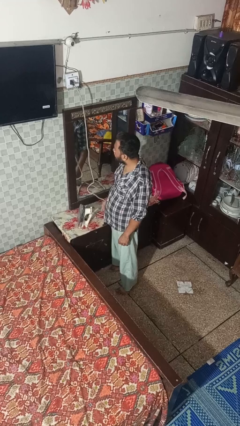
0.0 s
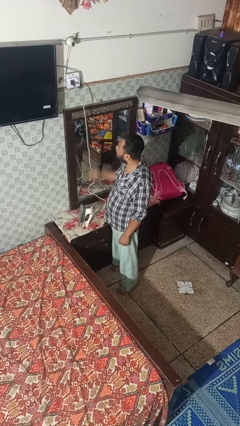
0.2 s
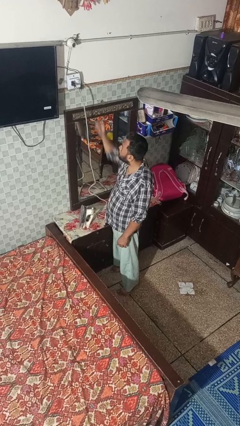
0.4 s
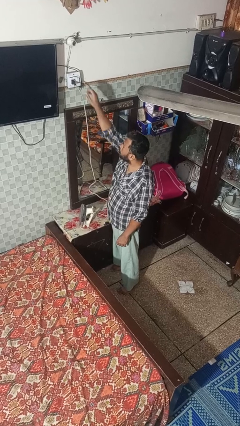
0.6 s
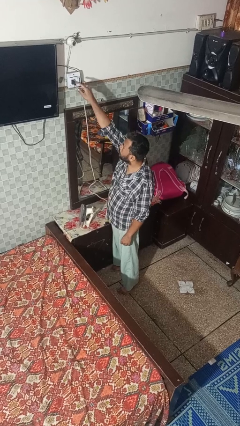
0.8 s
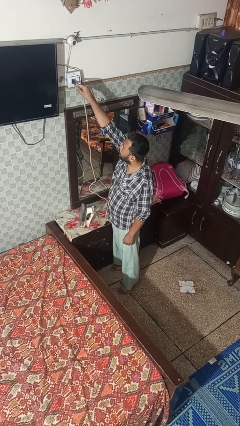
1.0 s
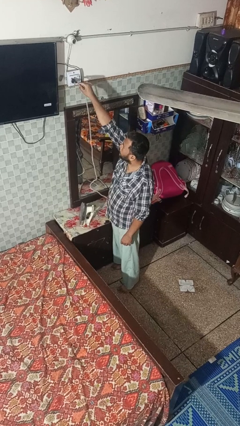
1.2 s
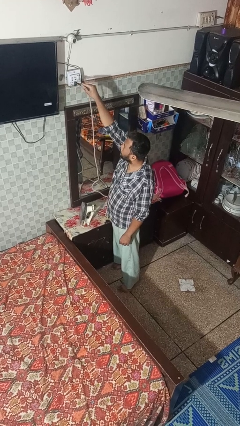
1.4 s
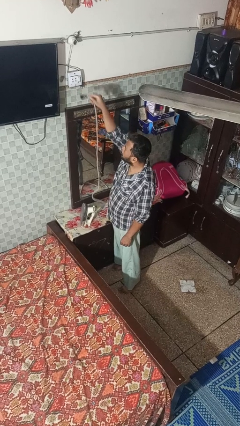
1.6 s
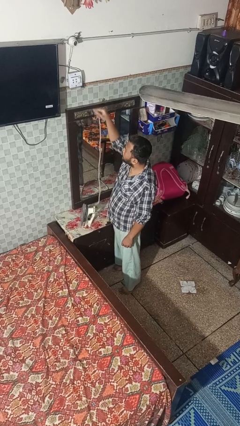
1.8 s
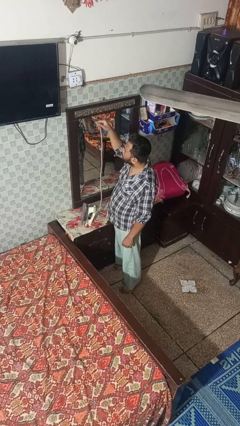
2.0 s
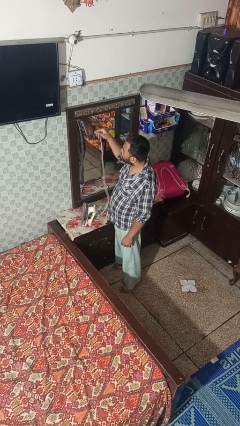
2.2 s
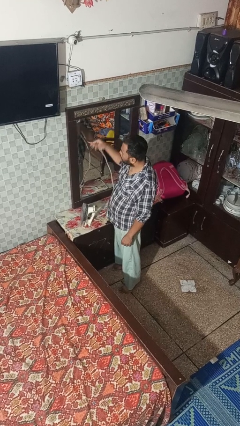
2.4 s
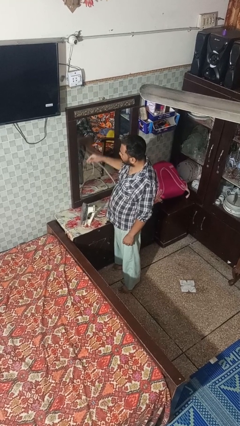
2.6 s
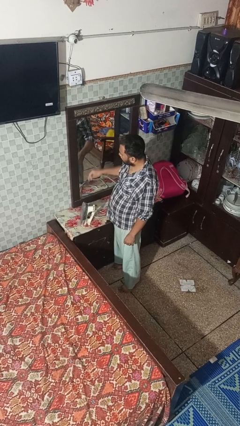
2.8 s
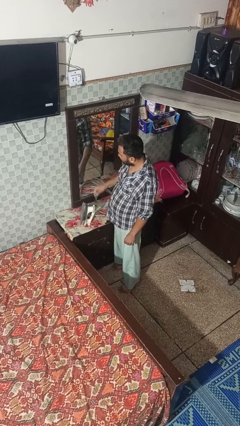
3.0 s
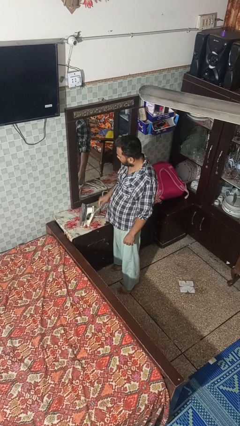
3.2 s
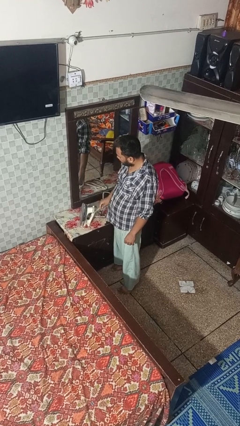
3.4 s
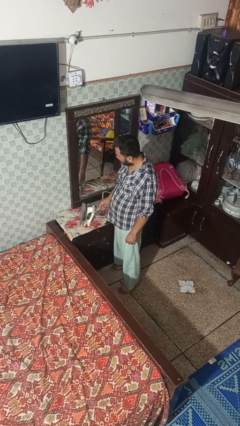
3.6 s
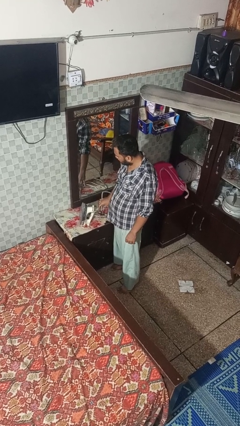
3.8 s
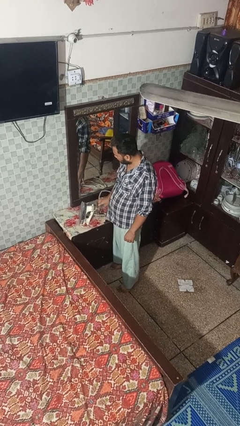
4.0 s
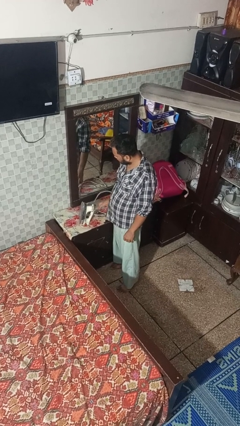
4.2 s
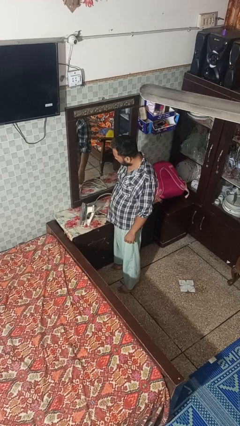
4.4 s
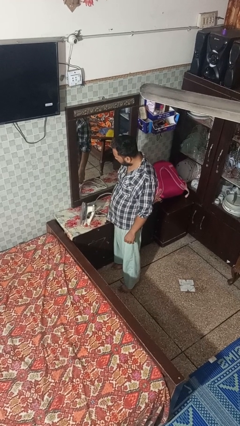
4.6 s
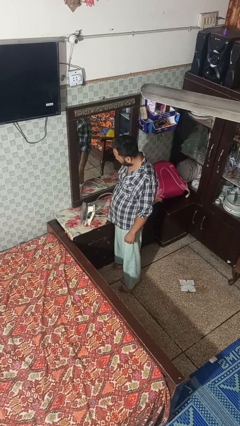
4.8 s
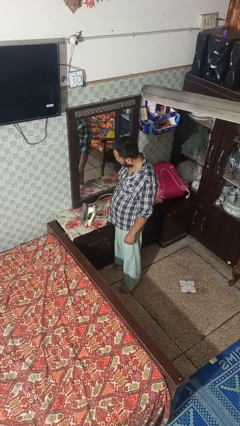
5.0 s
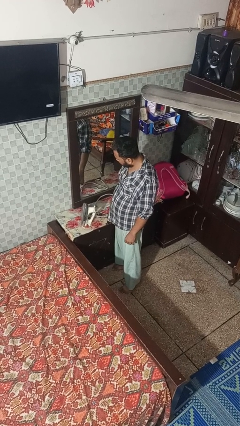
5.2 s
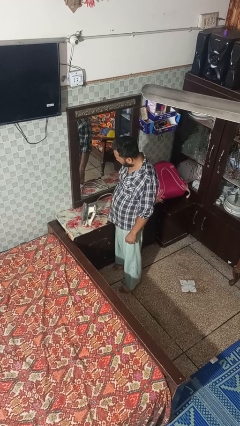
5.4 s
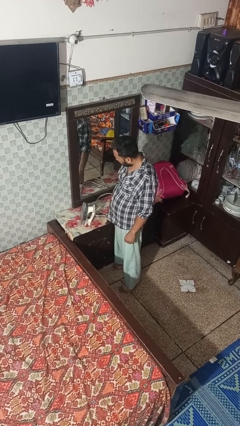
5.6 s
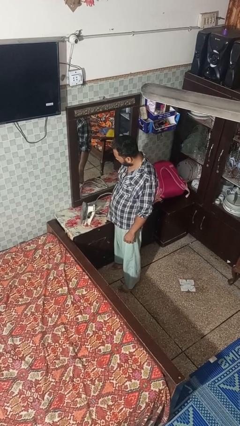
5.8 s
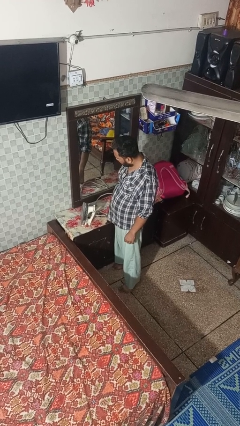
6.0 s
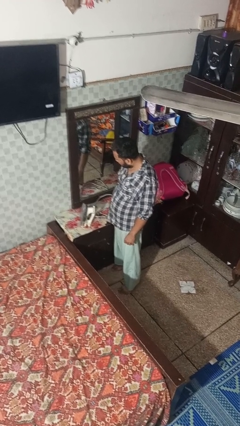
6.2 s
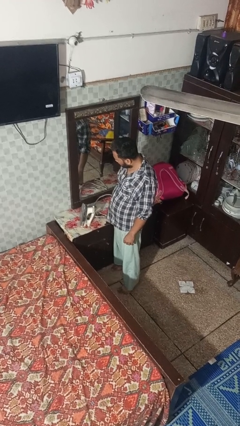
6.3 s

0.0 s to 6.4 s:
person unplugs from electrical socket

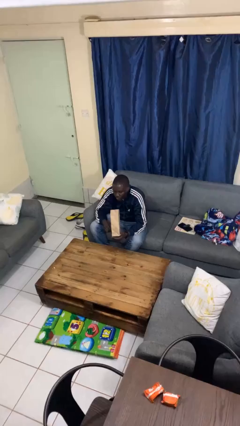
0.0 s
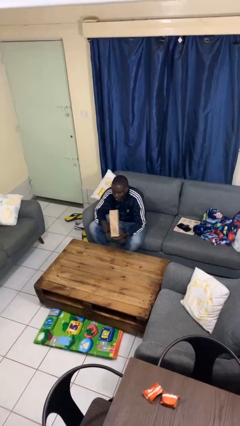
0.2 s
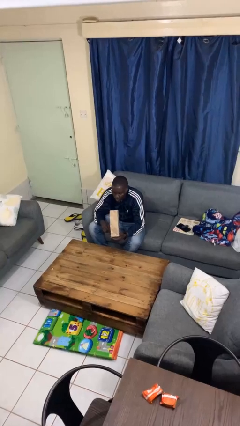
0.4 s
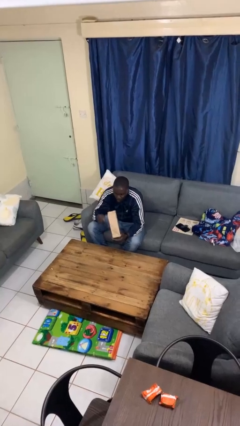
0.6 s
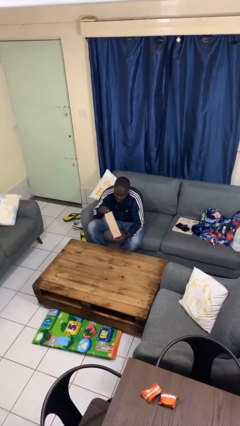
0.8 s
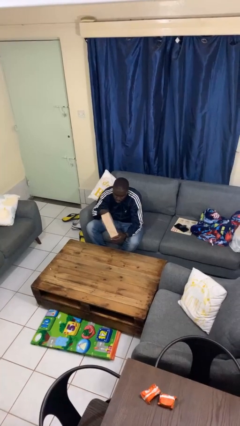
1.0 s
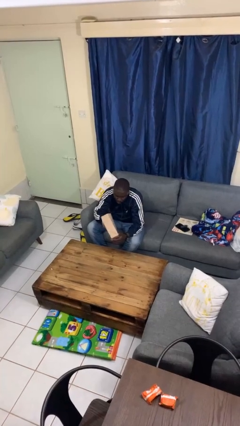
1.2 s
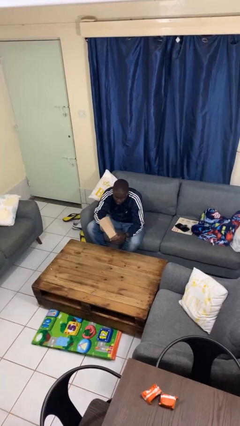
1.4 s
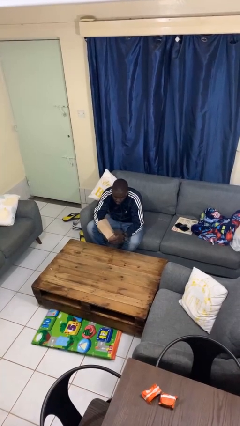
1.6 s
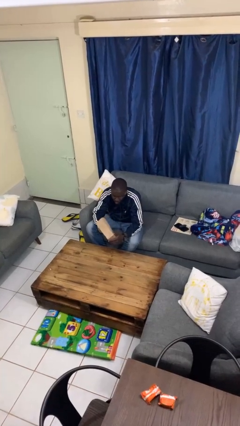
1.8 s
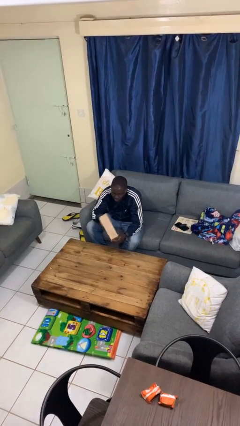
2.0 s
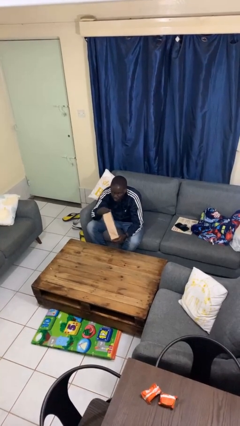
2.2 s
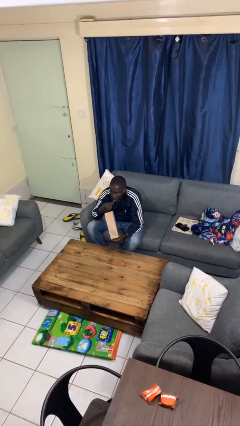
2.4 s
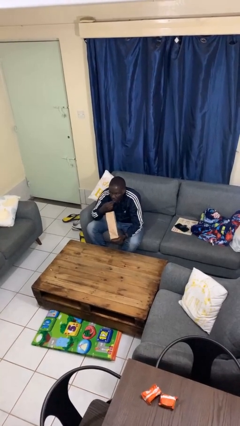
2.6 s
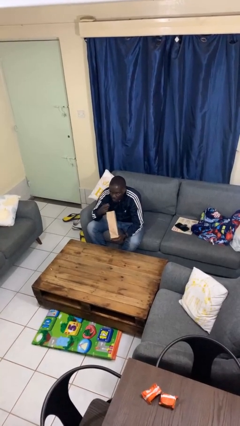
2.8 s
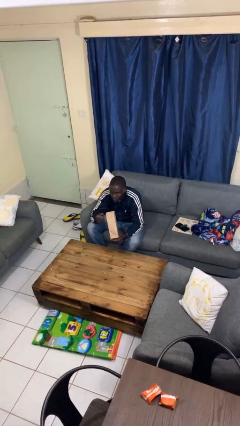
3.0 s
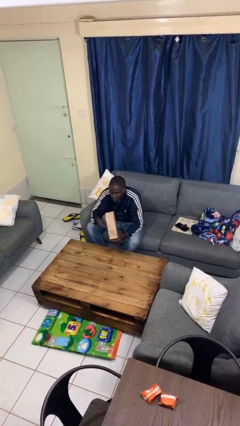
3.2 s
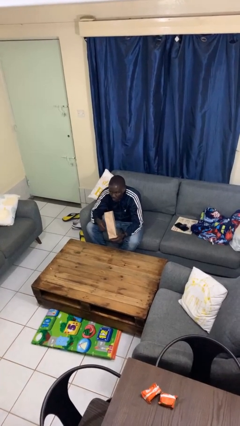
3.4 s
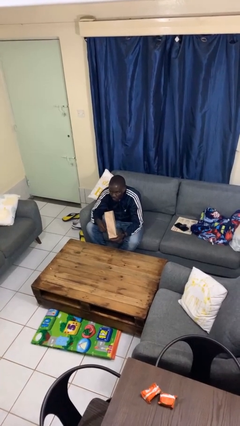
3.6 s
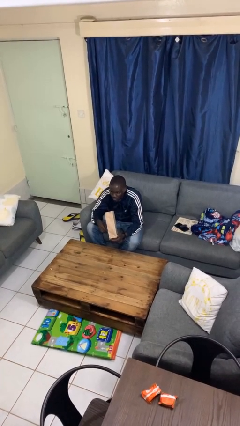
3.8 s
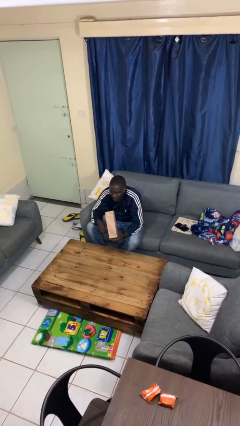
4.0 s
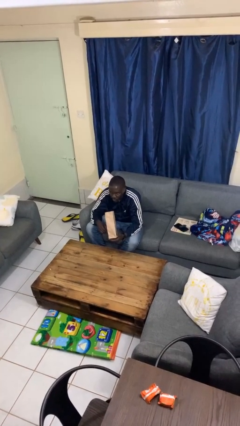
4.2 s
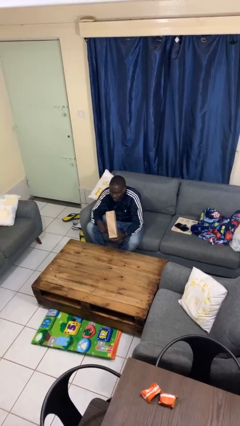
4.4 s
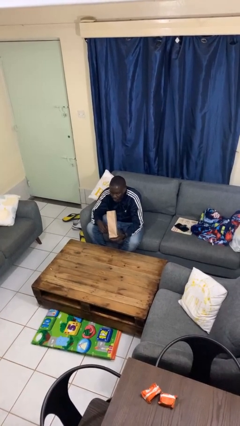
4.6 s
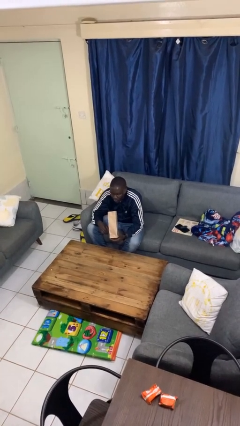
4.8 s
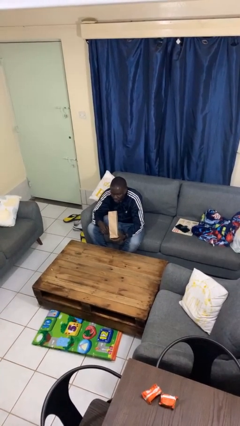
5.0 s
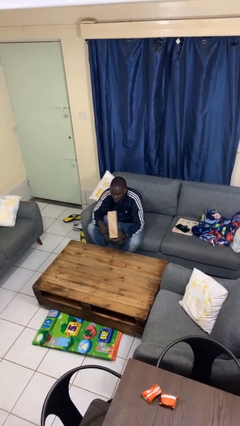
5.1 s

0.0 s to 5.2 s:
person eats snack from bag

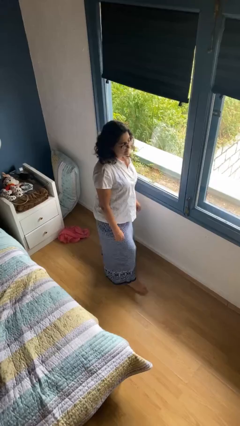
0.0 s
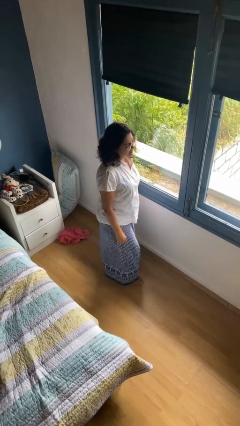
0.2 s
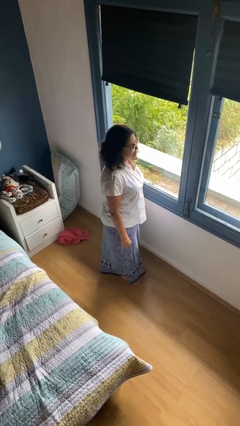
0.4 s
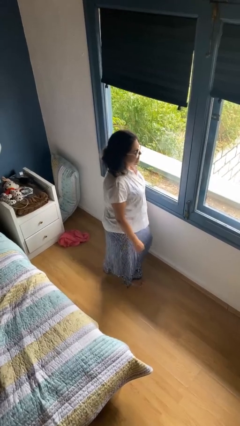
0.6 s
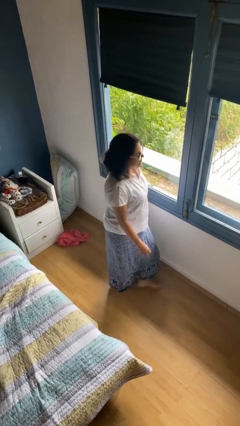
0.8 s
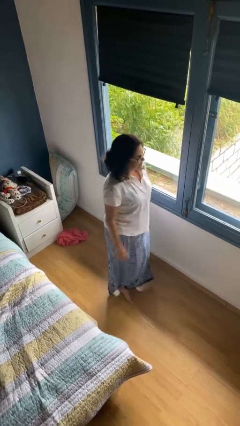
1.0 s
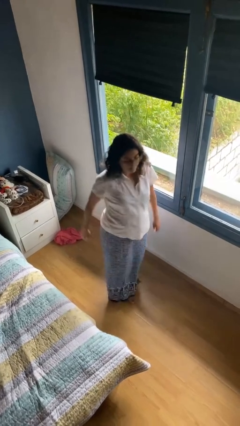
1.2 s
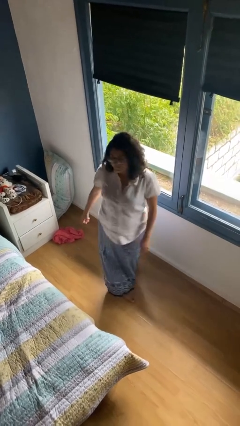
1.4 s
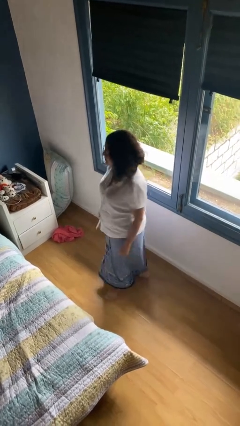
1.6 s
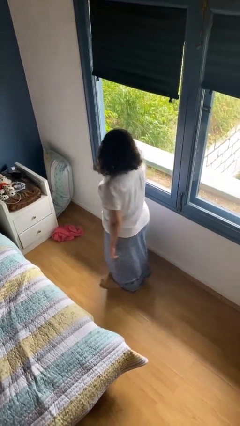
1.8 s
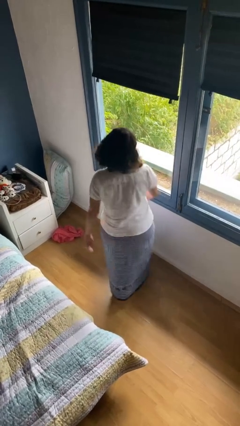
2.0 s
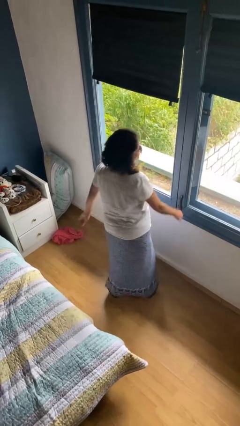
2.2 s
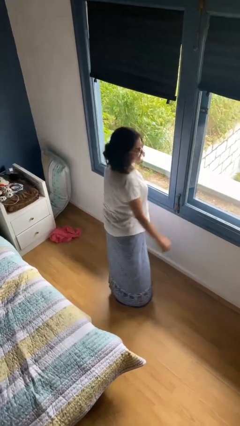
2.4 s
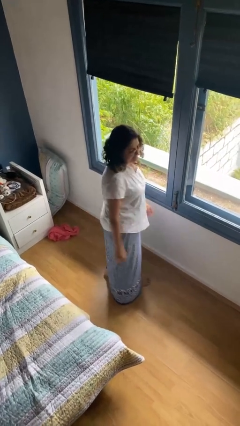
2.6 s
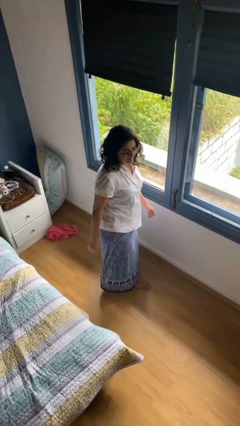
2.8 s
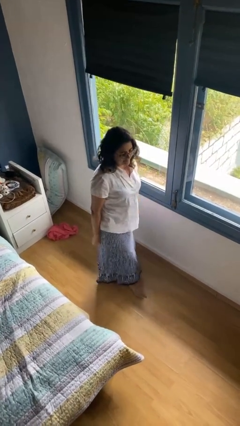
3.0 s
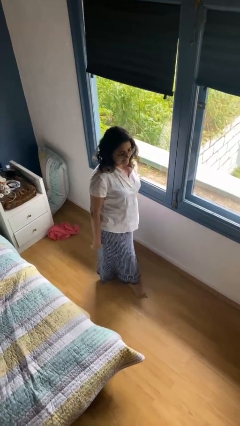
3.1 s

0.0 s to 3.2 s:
person twirls

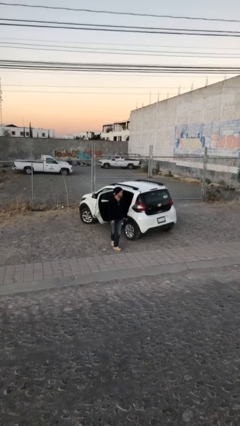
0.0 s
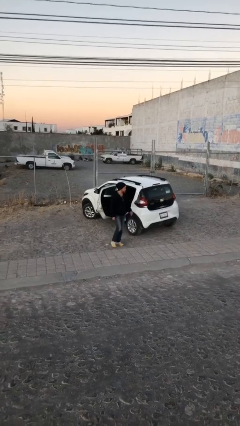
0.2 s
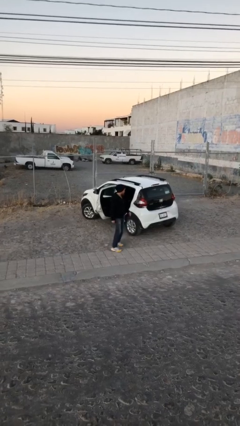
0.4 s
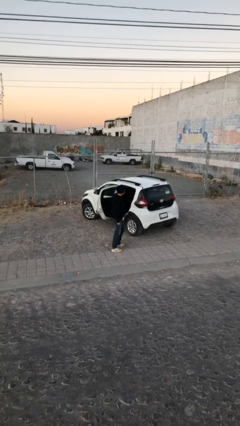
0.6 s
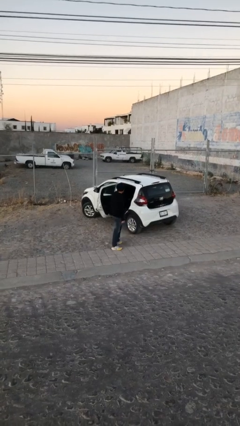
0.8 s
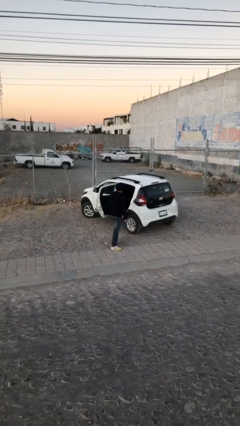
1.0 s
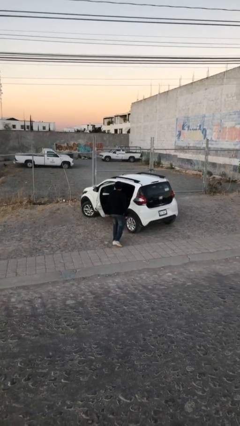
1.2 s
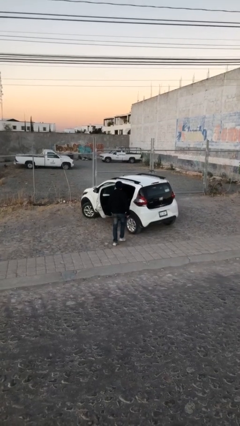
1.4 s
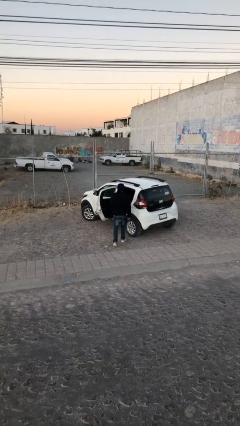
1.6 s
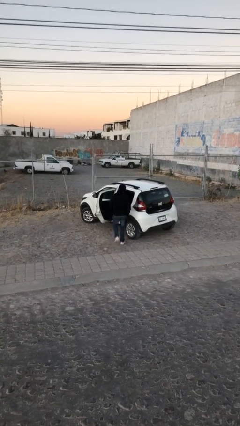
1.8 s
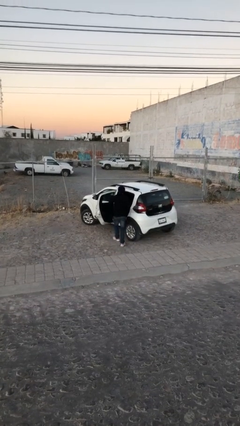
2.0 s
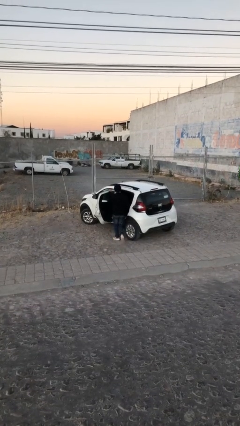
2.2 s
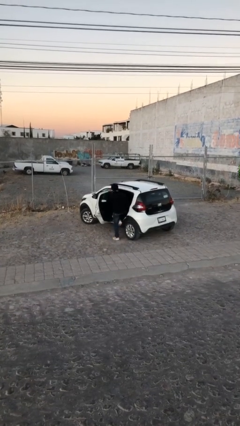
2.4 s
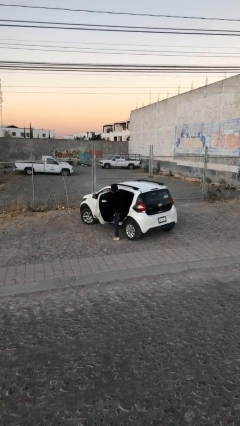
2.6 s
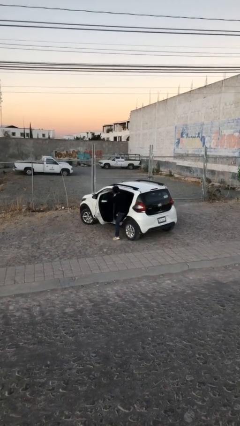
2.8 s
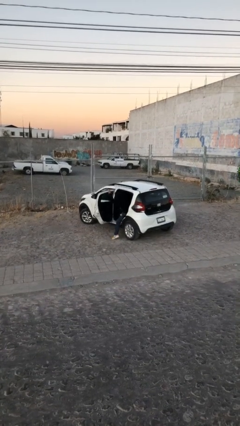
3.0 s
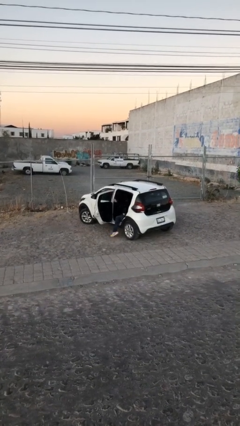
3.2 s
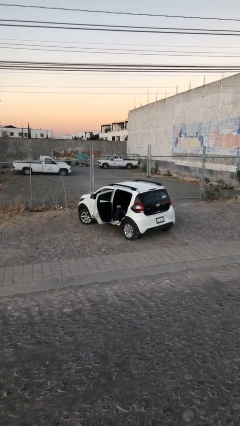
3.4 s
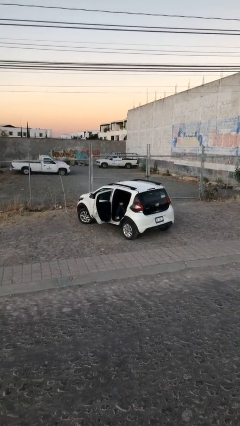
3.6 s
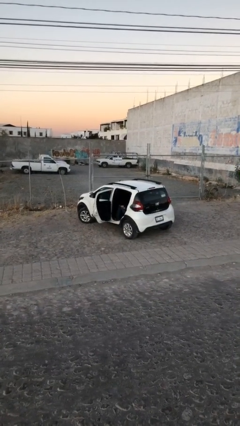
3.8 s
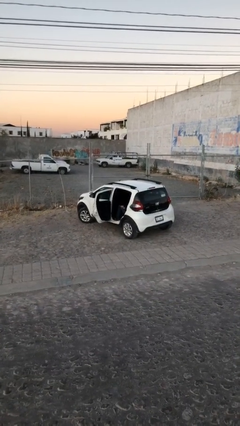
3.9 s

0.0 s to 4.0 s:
person enters car
